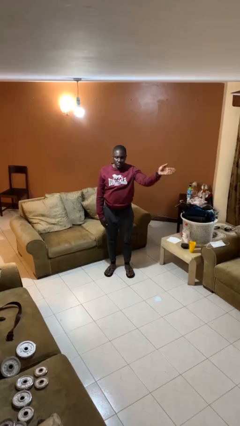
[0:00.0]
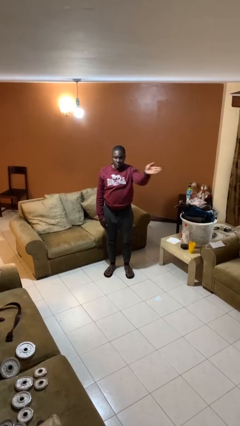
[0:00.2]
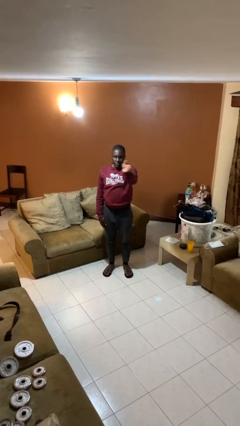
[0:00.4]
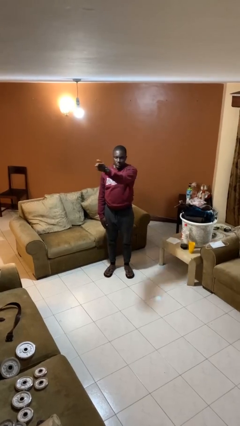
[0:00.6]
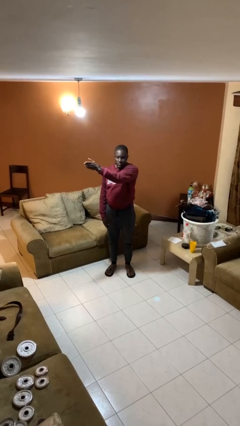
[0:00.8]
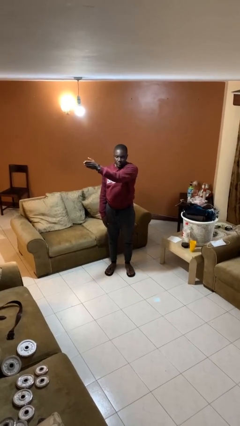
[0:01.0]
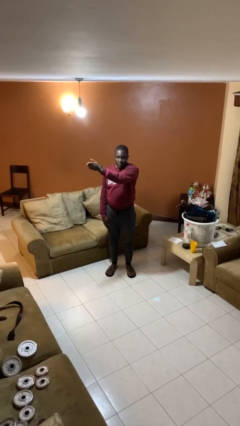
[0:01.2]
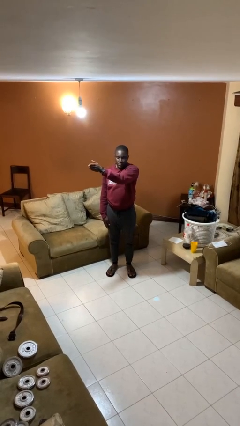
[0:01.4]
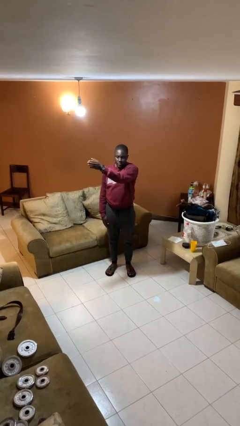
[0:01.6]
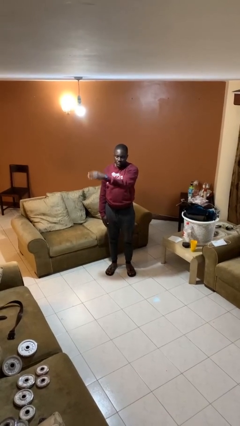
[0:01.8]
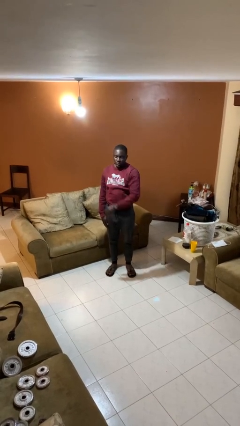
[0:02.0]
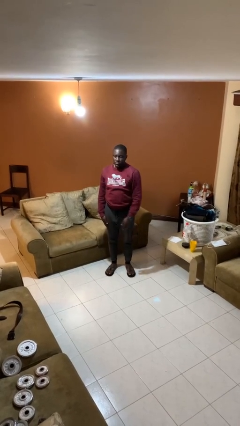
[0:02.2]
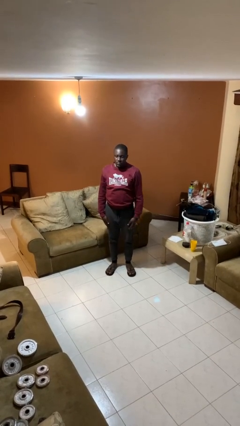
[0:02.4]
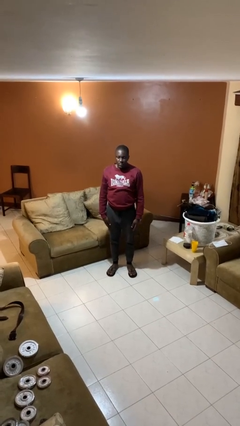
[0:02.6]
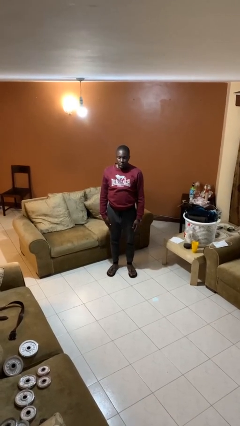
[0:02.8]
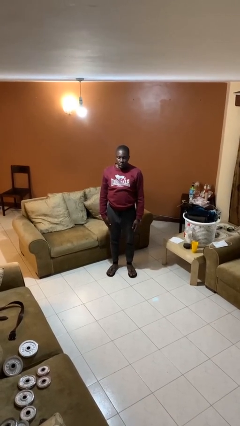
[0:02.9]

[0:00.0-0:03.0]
person gestures swipe right

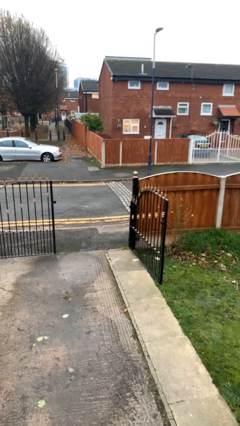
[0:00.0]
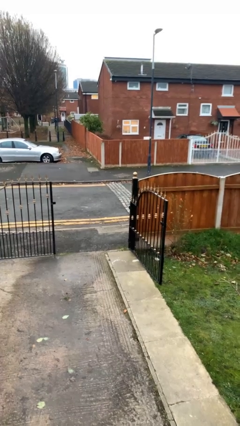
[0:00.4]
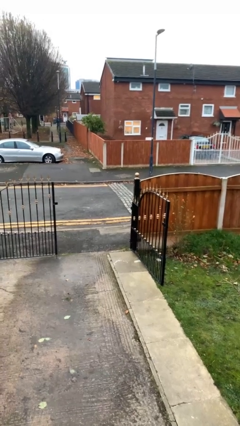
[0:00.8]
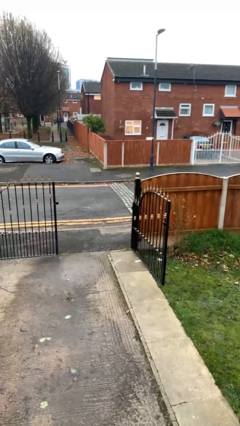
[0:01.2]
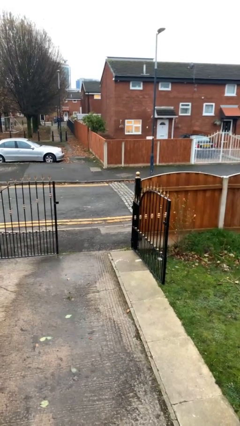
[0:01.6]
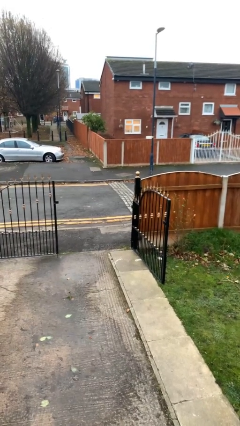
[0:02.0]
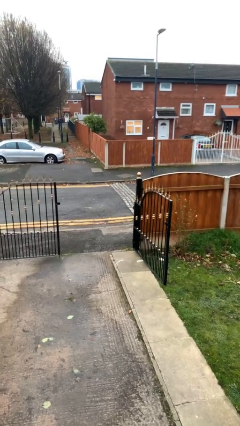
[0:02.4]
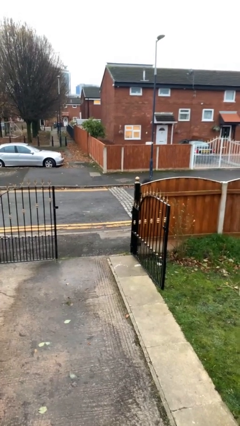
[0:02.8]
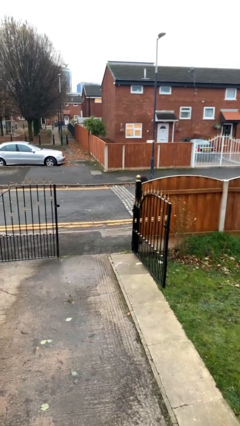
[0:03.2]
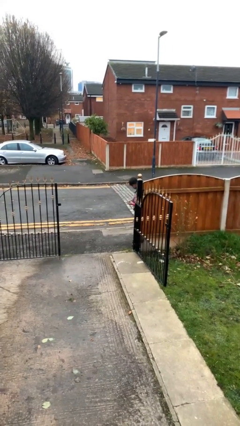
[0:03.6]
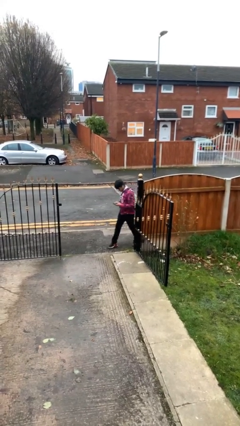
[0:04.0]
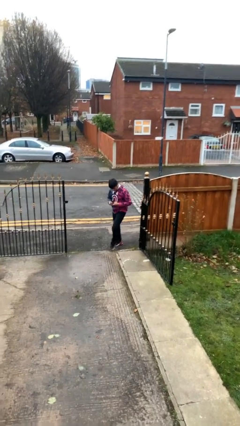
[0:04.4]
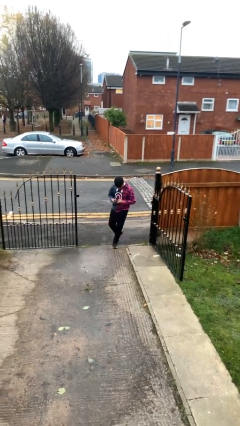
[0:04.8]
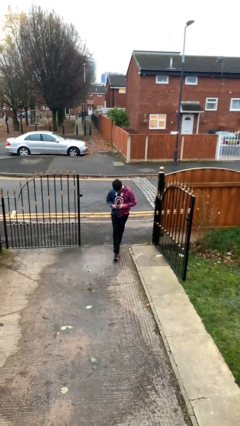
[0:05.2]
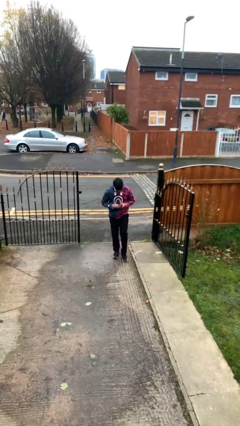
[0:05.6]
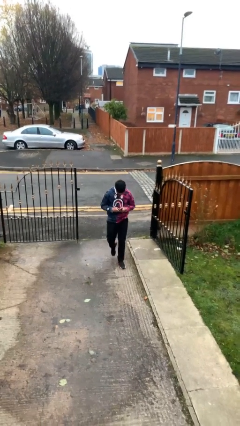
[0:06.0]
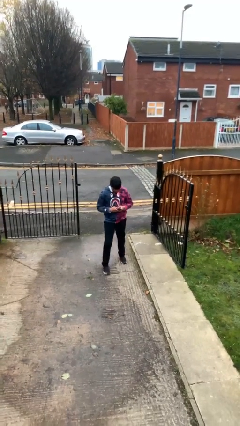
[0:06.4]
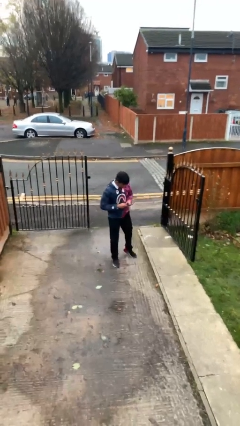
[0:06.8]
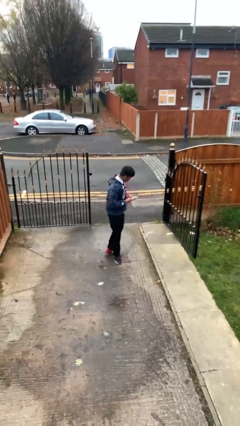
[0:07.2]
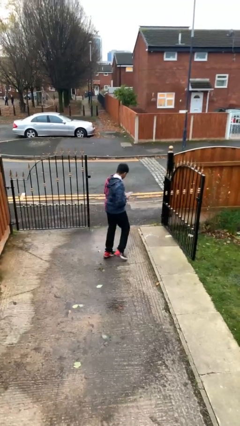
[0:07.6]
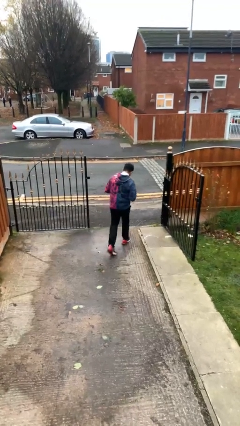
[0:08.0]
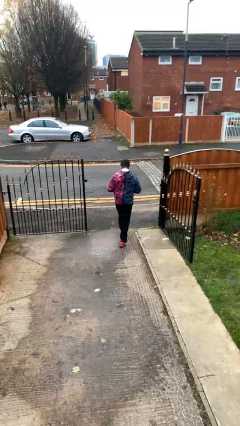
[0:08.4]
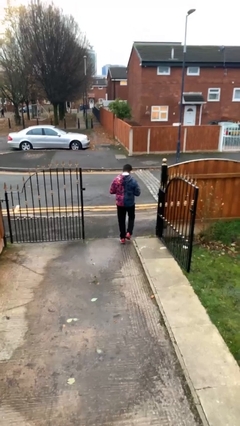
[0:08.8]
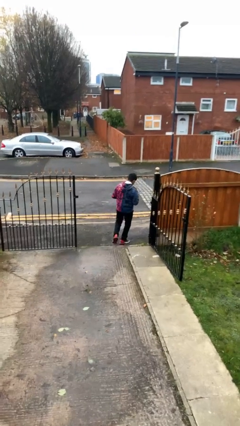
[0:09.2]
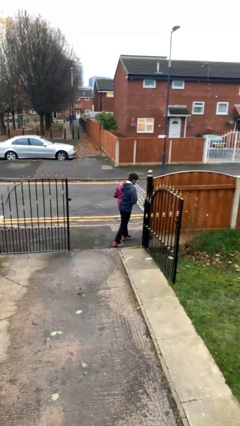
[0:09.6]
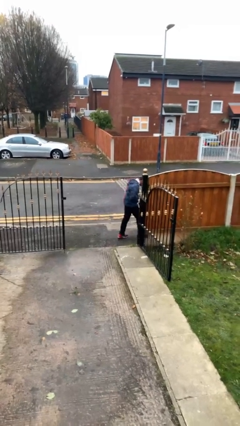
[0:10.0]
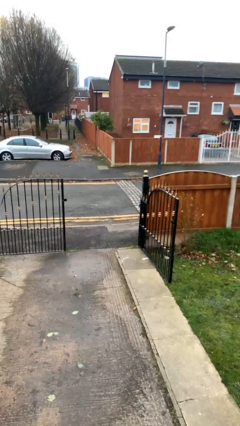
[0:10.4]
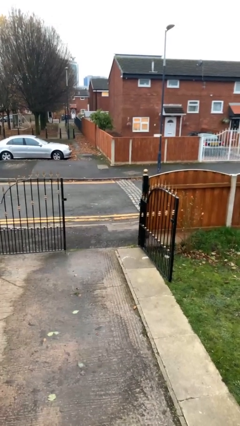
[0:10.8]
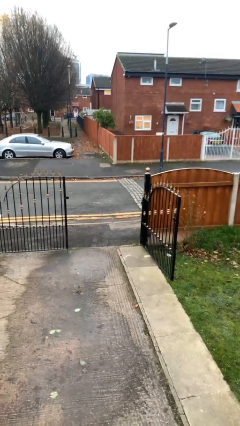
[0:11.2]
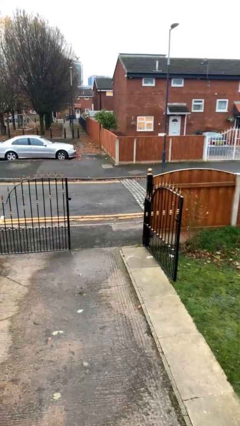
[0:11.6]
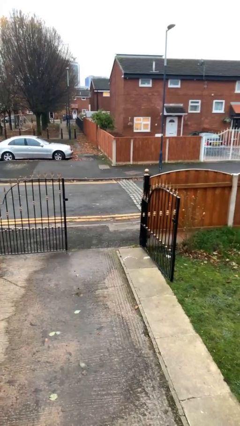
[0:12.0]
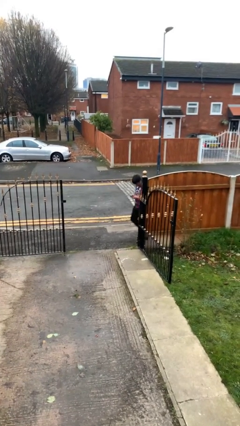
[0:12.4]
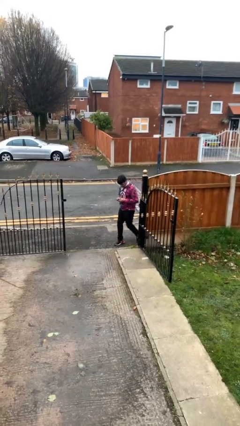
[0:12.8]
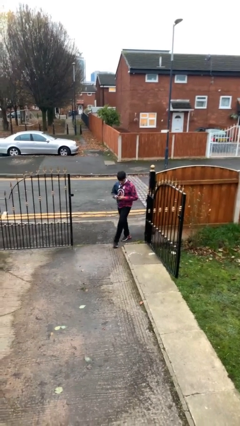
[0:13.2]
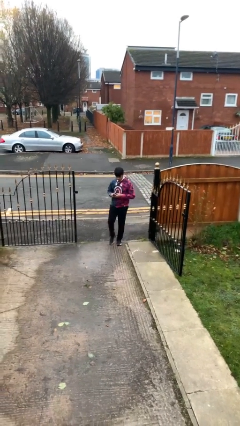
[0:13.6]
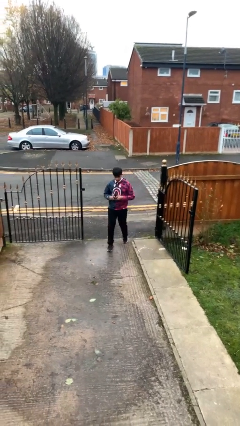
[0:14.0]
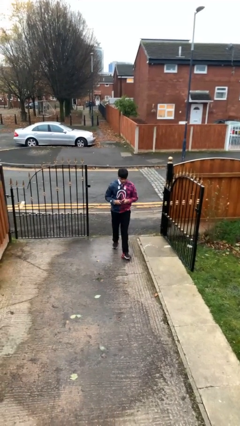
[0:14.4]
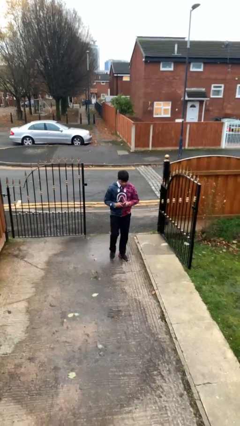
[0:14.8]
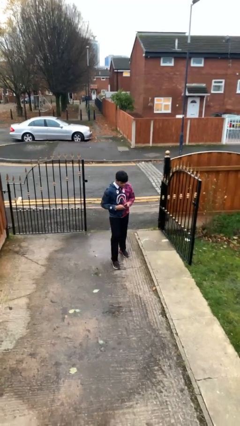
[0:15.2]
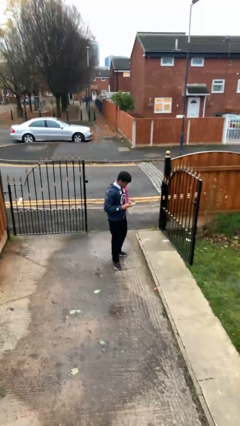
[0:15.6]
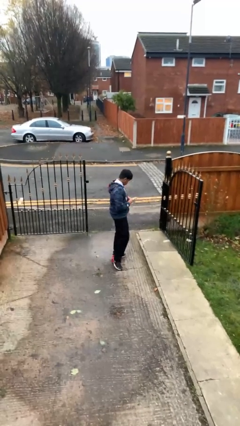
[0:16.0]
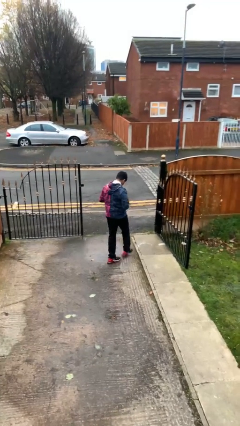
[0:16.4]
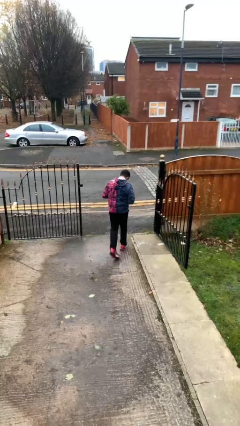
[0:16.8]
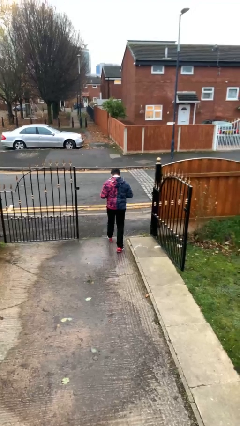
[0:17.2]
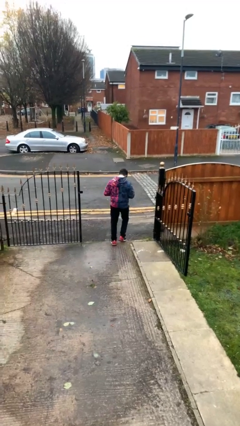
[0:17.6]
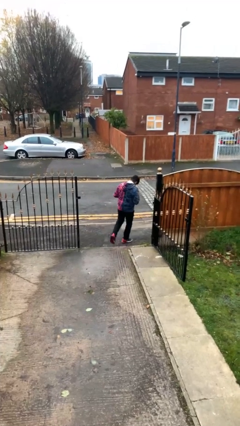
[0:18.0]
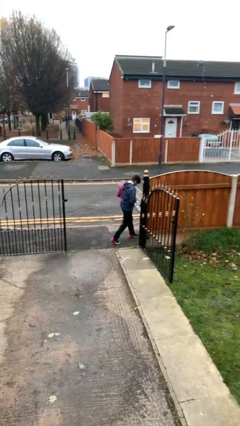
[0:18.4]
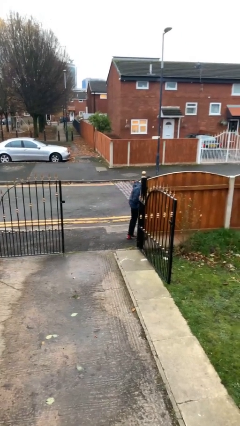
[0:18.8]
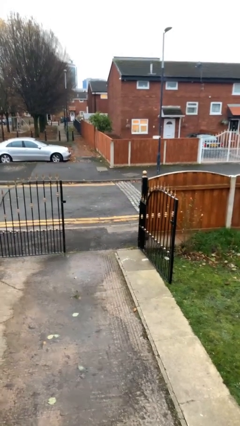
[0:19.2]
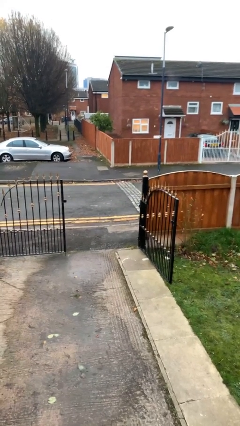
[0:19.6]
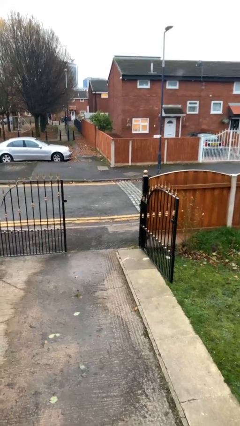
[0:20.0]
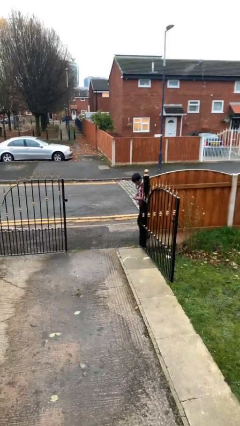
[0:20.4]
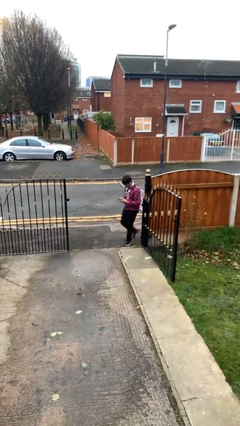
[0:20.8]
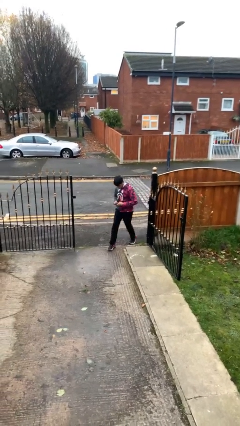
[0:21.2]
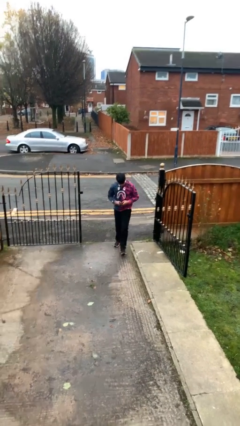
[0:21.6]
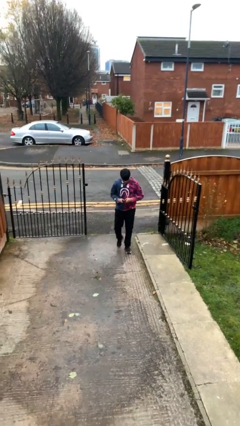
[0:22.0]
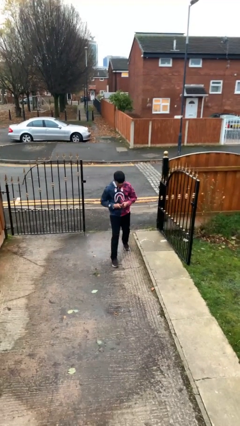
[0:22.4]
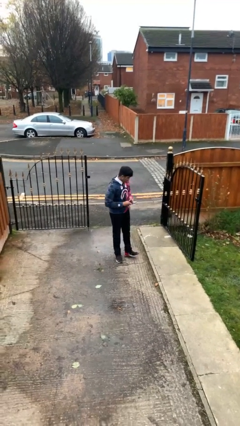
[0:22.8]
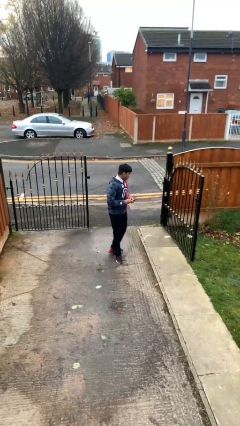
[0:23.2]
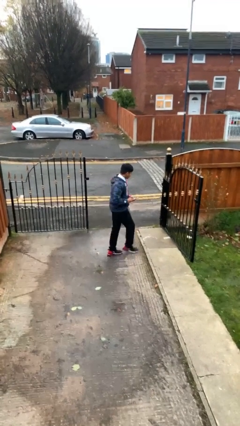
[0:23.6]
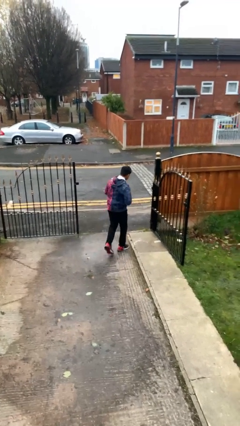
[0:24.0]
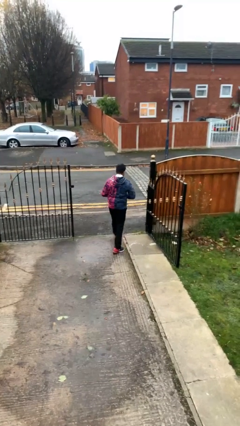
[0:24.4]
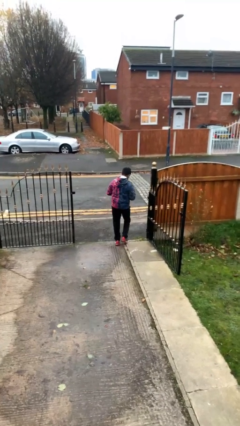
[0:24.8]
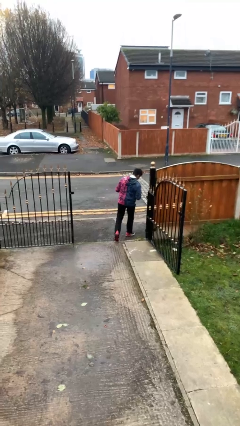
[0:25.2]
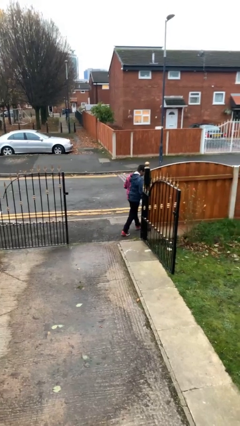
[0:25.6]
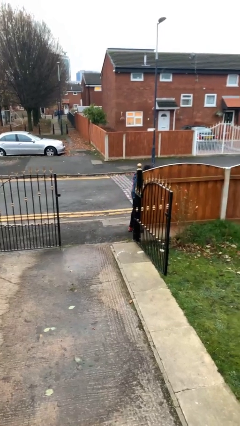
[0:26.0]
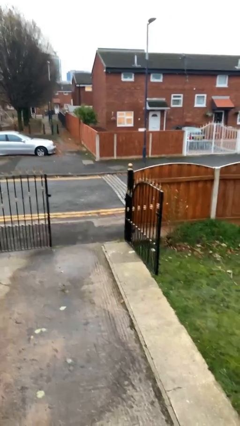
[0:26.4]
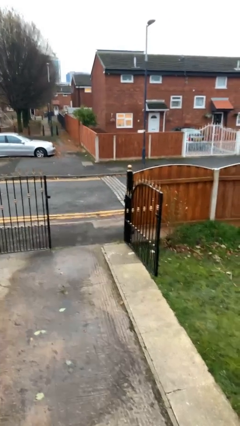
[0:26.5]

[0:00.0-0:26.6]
person texts on phone

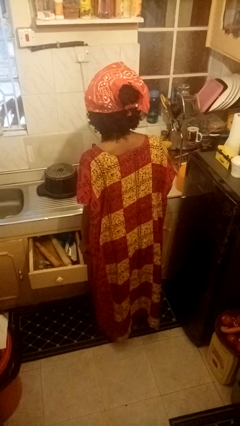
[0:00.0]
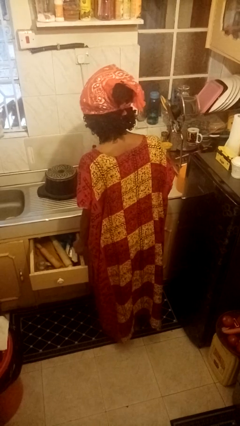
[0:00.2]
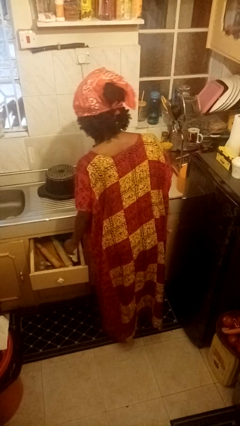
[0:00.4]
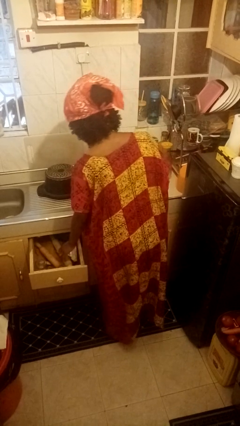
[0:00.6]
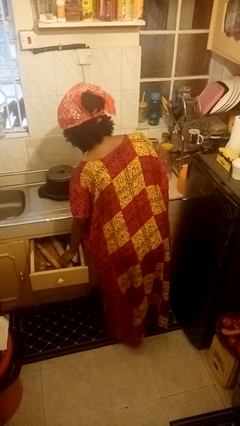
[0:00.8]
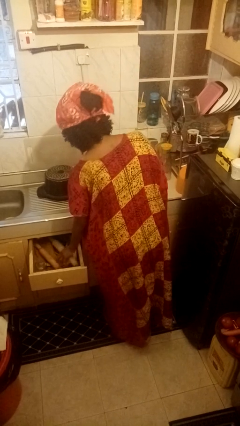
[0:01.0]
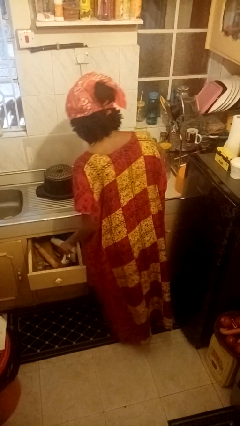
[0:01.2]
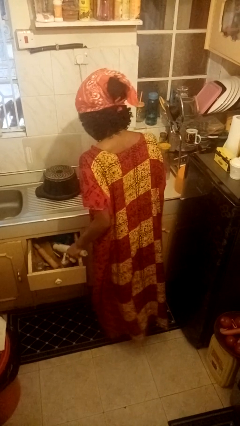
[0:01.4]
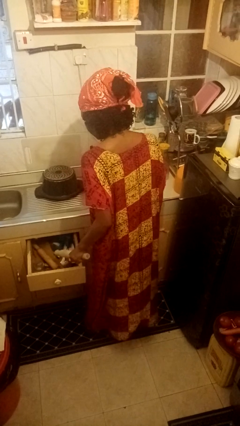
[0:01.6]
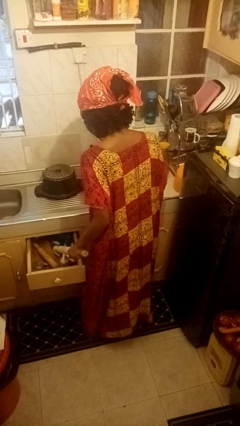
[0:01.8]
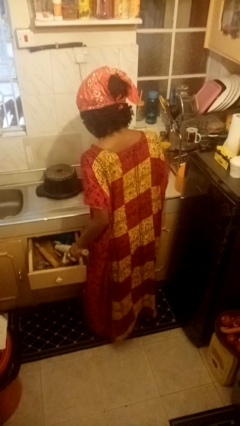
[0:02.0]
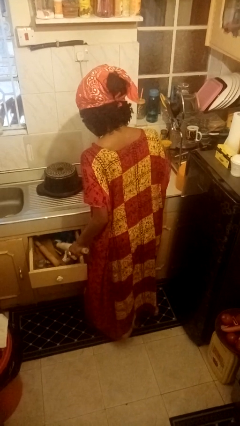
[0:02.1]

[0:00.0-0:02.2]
person takes object from kitchen drawer
